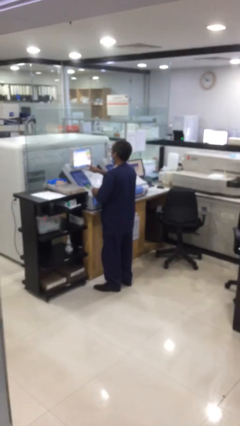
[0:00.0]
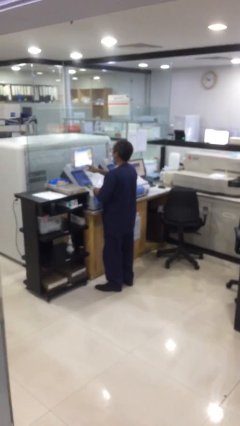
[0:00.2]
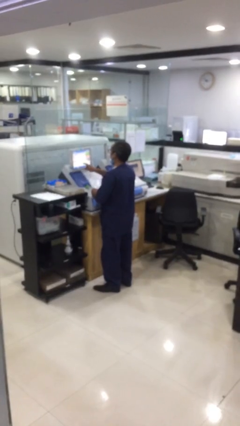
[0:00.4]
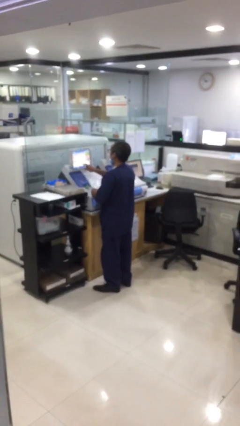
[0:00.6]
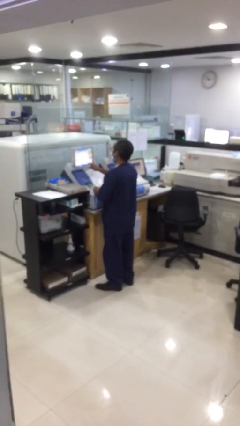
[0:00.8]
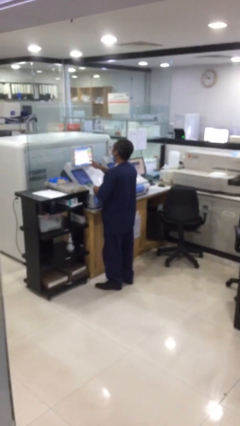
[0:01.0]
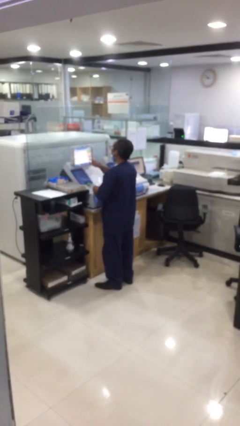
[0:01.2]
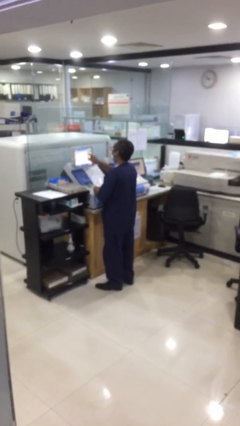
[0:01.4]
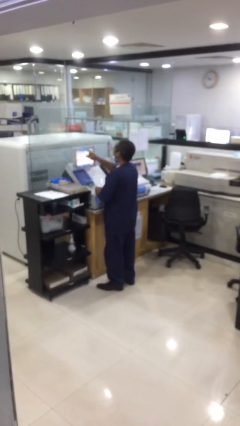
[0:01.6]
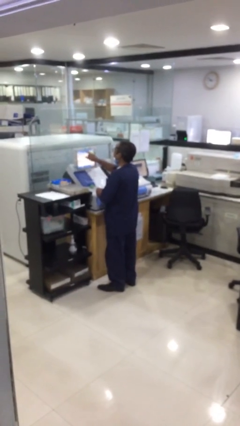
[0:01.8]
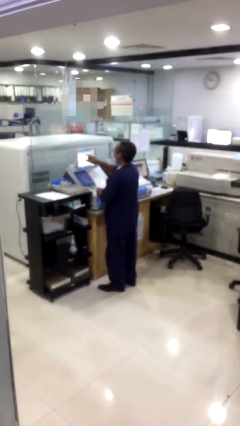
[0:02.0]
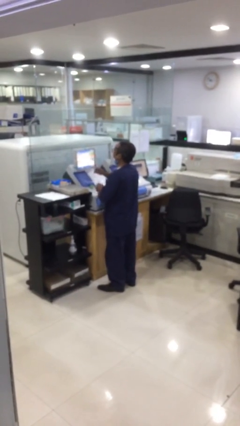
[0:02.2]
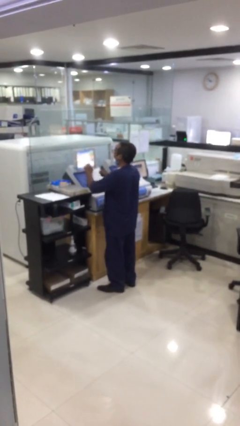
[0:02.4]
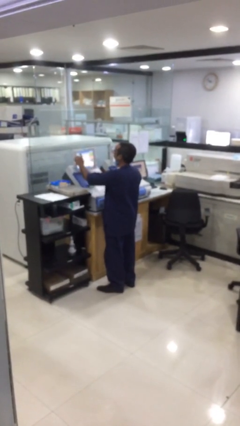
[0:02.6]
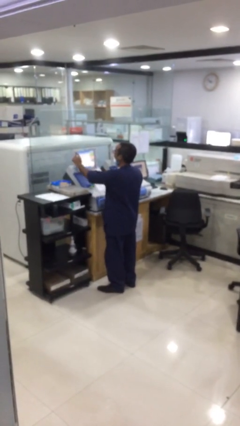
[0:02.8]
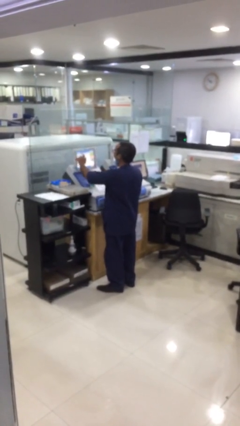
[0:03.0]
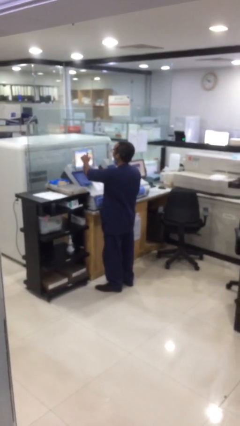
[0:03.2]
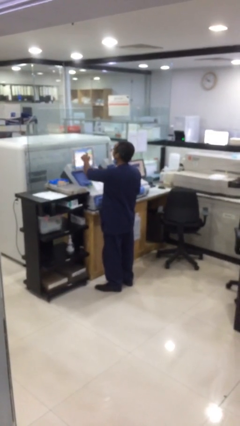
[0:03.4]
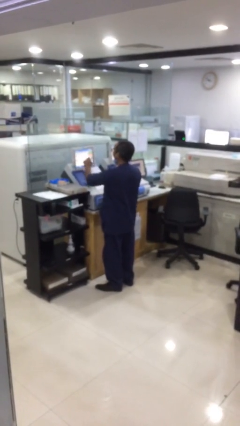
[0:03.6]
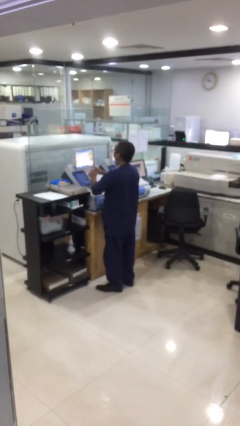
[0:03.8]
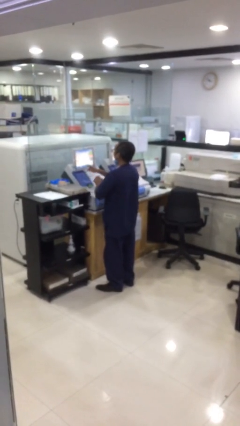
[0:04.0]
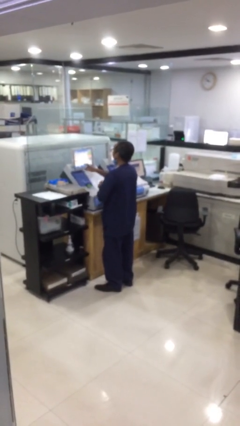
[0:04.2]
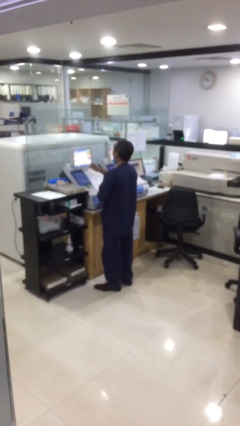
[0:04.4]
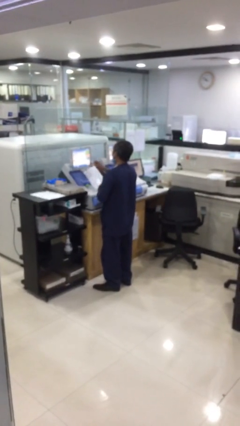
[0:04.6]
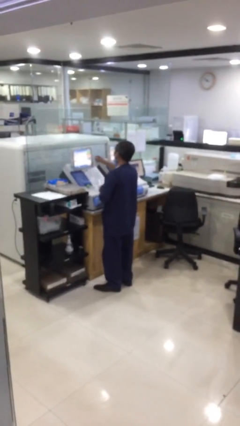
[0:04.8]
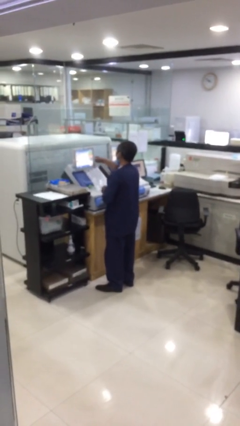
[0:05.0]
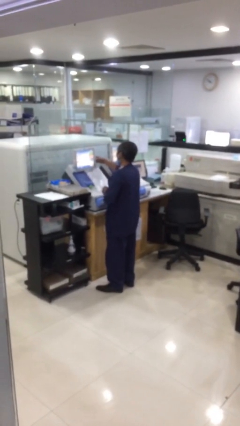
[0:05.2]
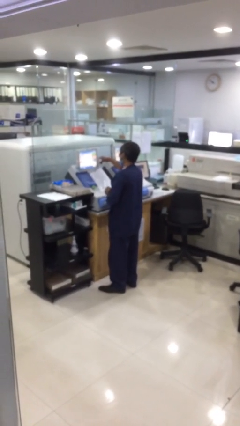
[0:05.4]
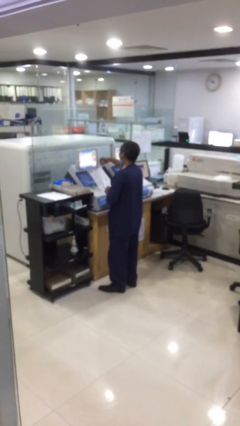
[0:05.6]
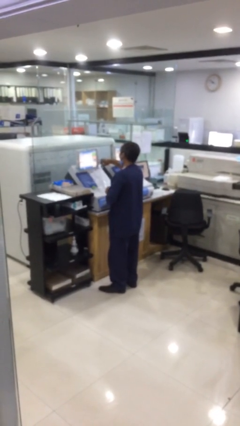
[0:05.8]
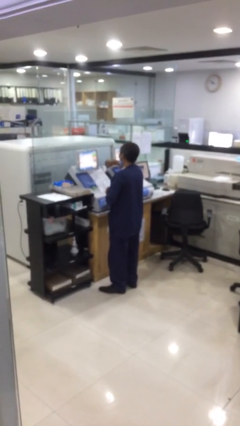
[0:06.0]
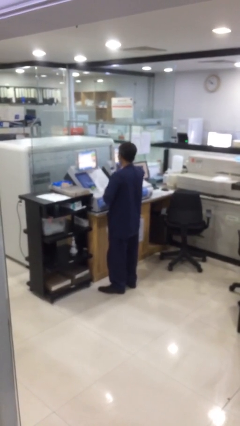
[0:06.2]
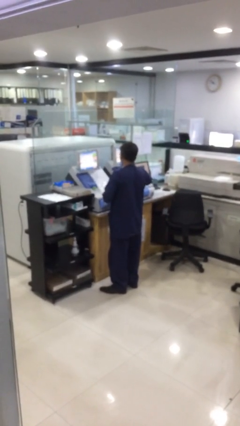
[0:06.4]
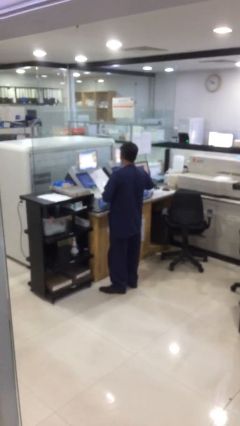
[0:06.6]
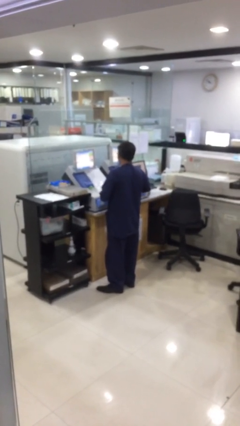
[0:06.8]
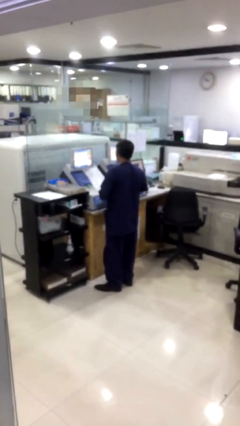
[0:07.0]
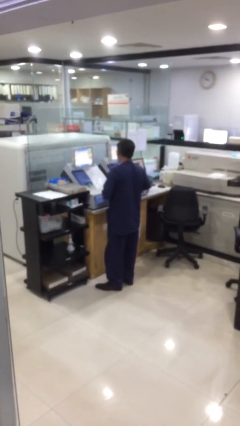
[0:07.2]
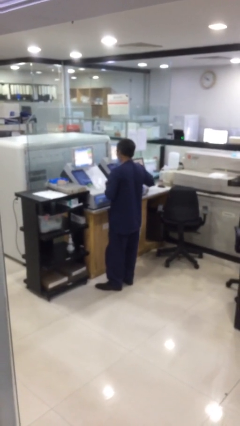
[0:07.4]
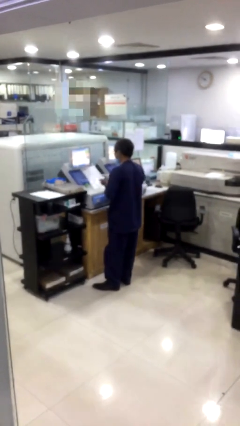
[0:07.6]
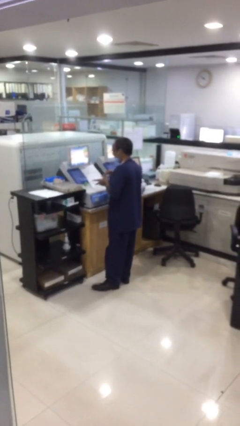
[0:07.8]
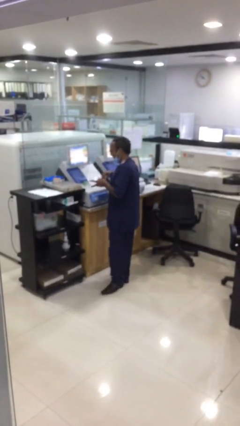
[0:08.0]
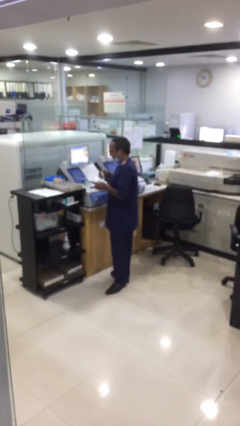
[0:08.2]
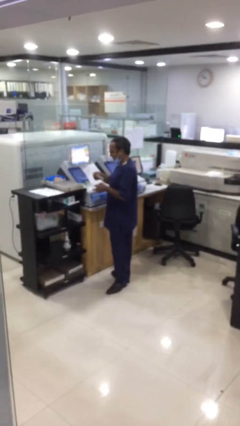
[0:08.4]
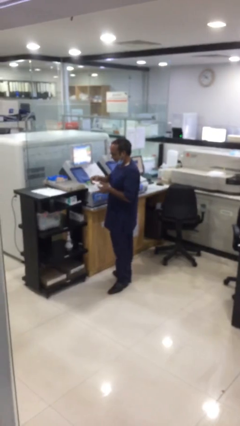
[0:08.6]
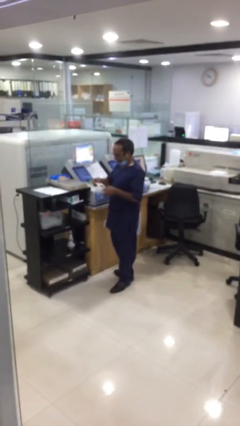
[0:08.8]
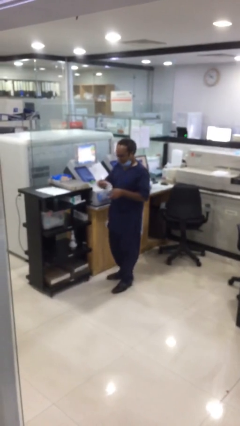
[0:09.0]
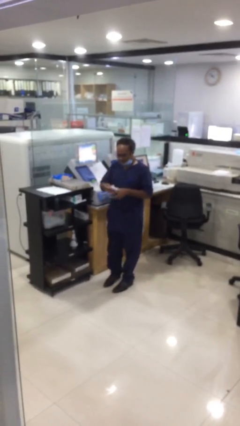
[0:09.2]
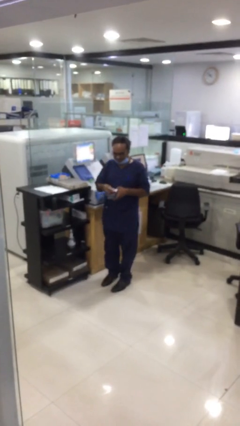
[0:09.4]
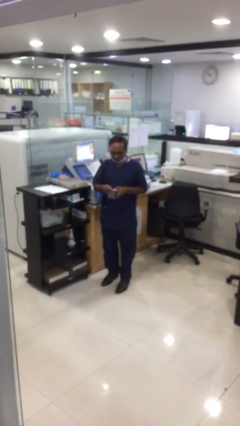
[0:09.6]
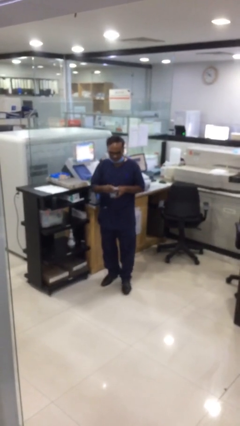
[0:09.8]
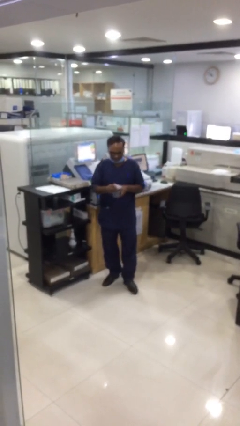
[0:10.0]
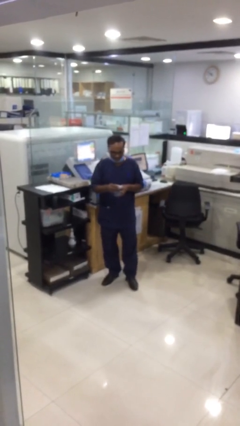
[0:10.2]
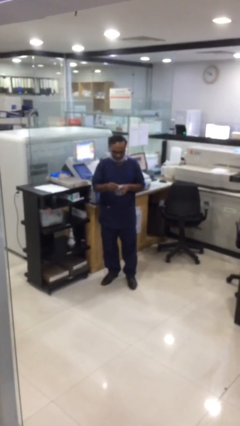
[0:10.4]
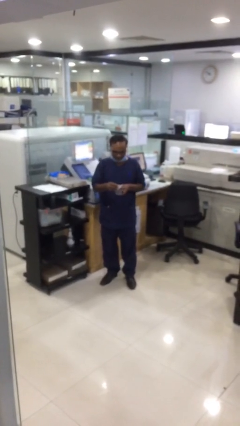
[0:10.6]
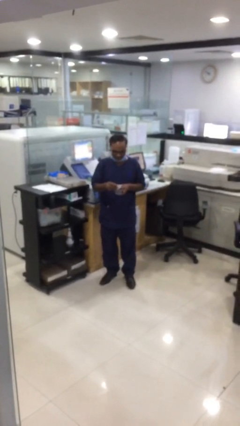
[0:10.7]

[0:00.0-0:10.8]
person purchases from machine

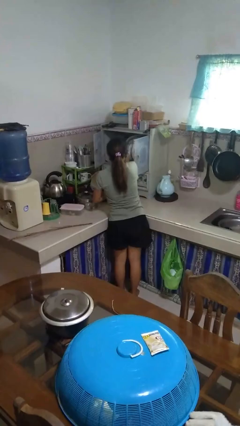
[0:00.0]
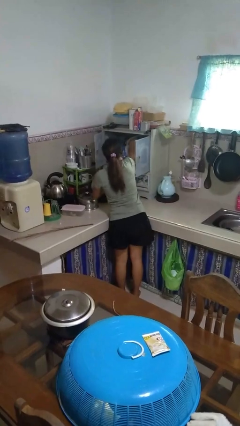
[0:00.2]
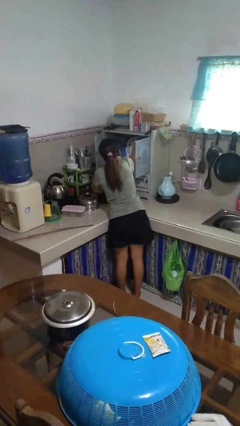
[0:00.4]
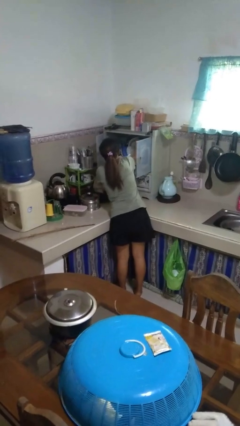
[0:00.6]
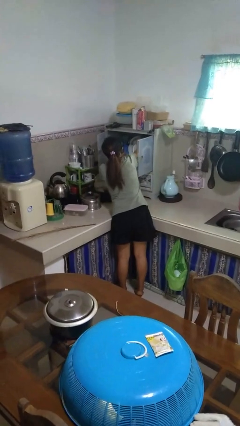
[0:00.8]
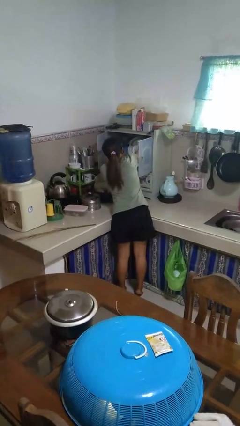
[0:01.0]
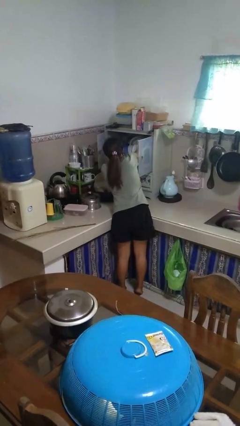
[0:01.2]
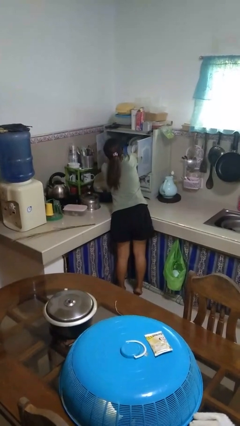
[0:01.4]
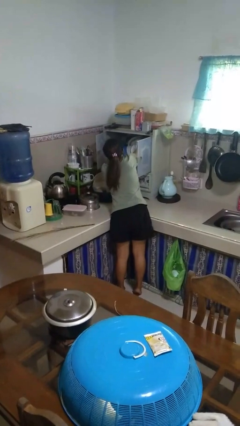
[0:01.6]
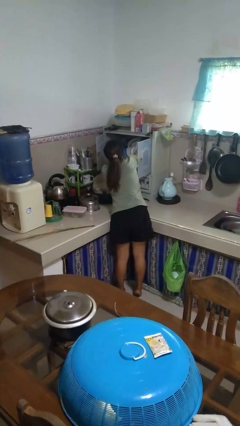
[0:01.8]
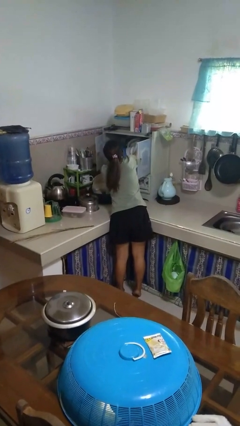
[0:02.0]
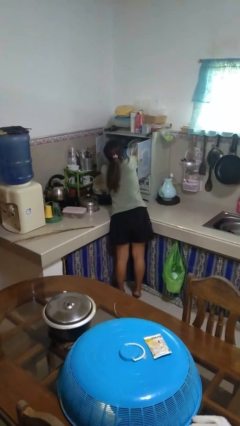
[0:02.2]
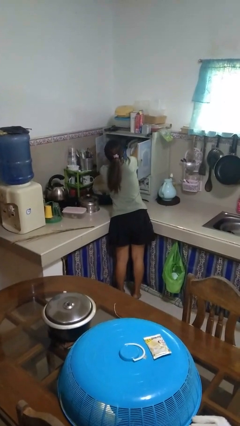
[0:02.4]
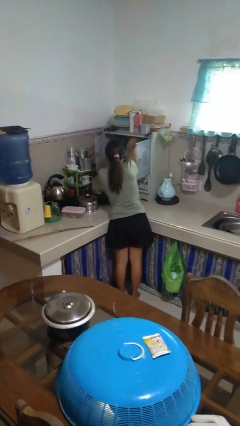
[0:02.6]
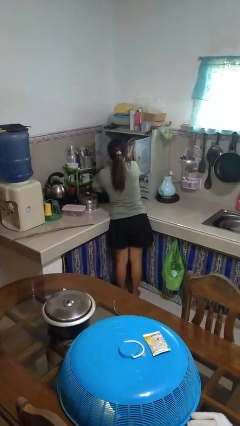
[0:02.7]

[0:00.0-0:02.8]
person searches in kitchen drawer

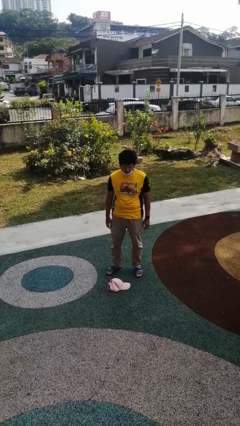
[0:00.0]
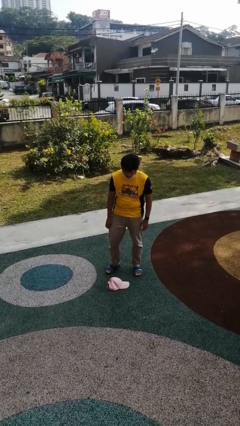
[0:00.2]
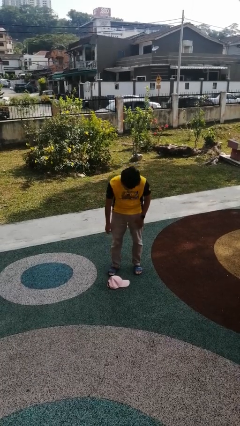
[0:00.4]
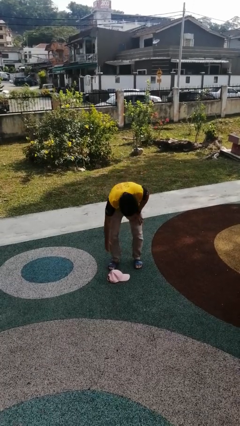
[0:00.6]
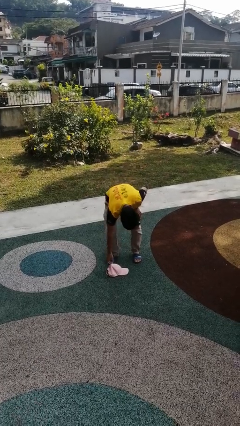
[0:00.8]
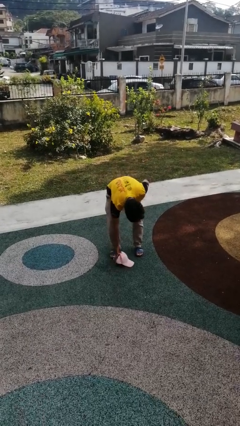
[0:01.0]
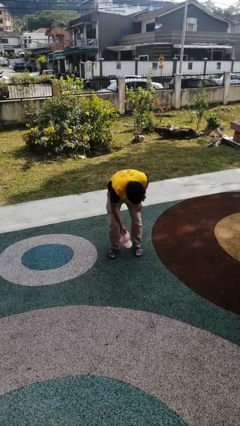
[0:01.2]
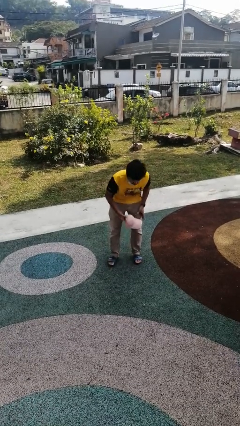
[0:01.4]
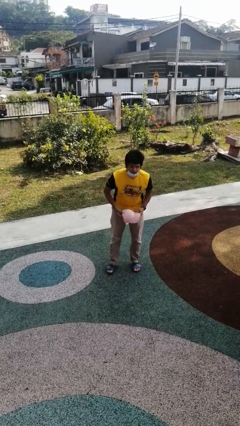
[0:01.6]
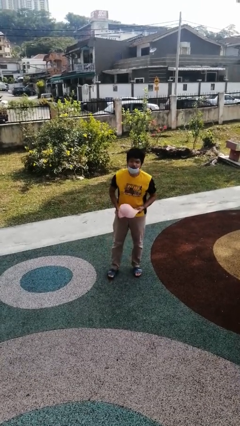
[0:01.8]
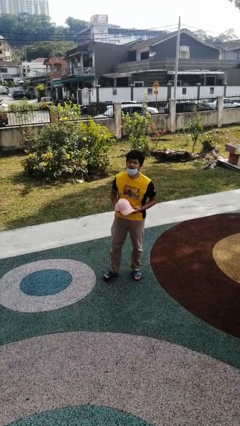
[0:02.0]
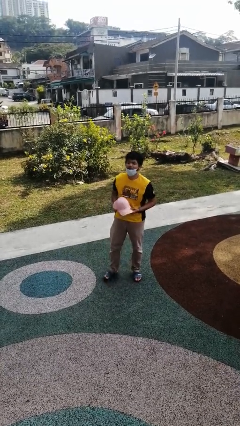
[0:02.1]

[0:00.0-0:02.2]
person picks up object from floor

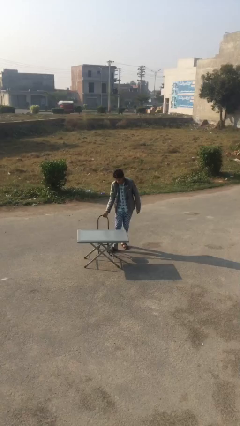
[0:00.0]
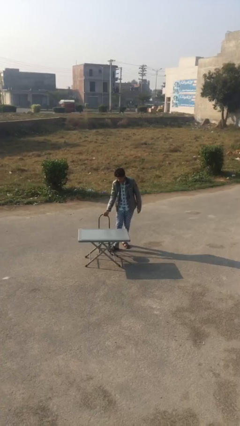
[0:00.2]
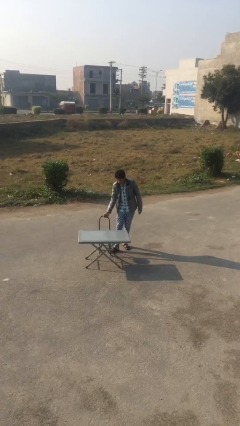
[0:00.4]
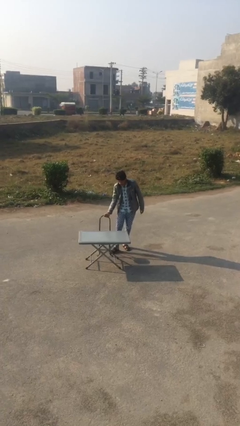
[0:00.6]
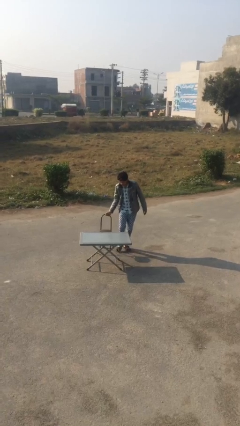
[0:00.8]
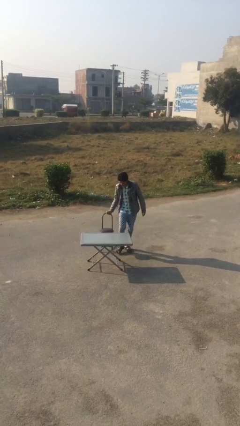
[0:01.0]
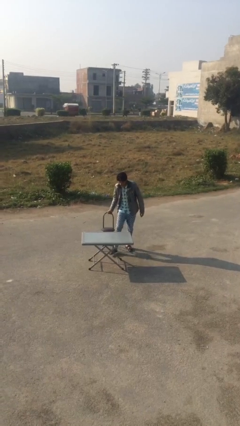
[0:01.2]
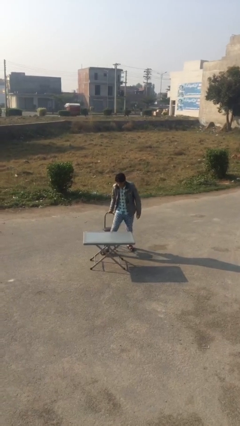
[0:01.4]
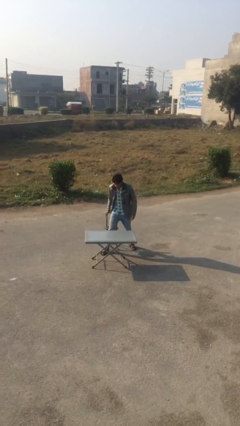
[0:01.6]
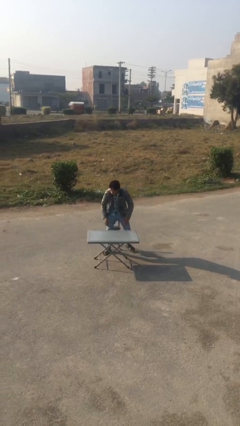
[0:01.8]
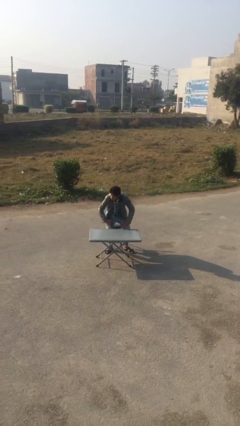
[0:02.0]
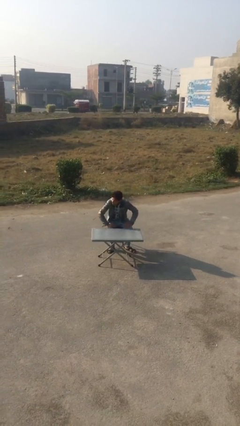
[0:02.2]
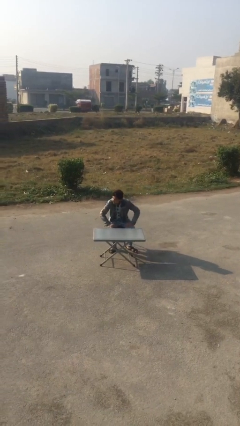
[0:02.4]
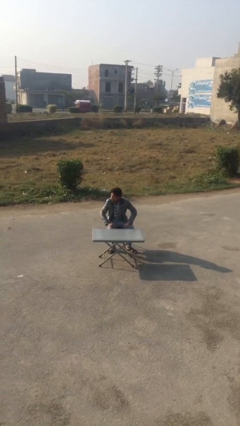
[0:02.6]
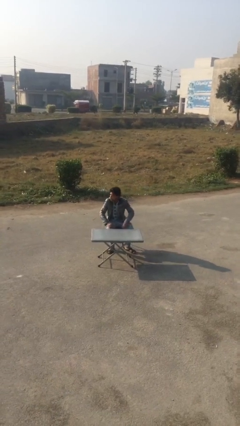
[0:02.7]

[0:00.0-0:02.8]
person sits down
